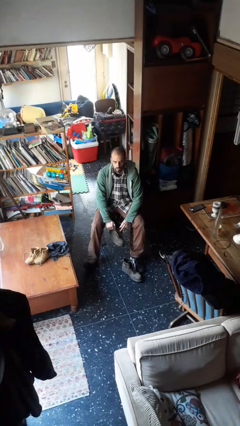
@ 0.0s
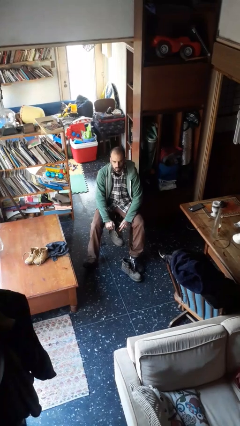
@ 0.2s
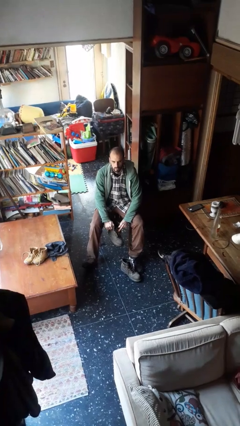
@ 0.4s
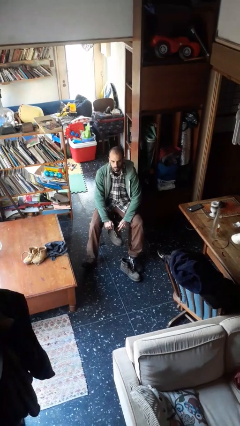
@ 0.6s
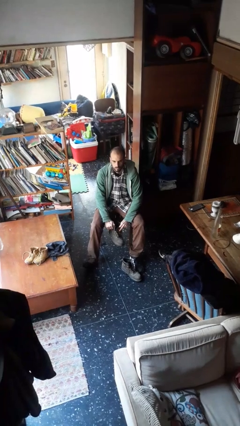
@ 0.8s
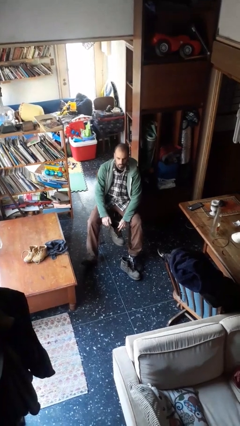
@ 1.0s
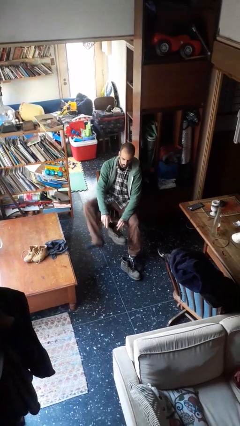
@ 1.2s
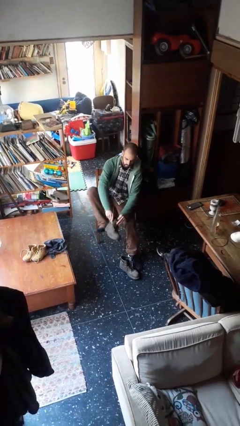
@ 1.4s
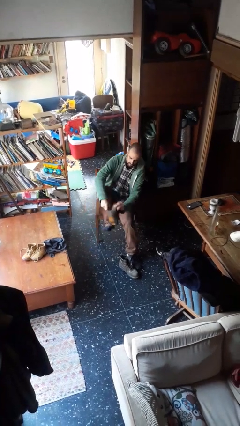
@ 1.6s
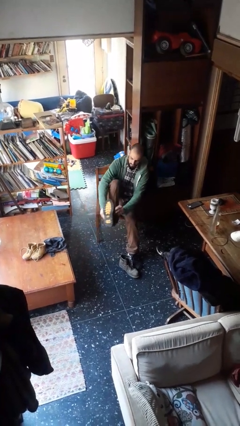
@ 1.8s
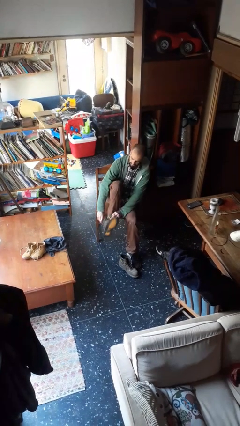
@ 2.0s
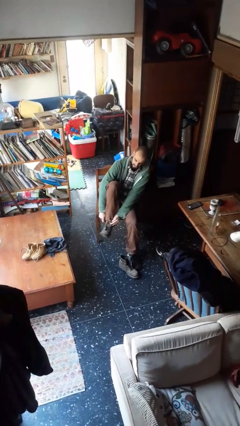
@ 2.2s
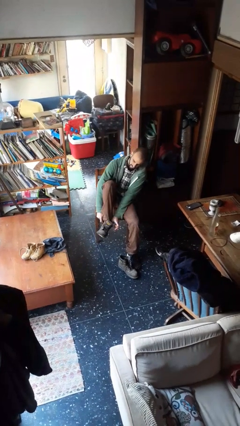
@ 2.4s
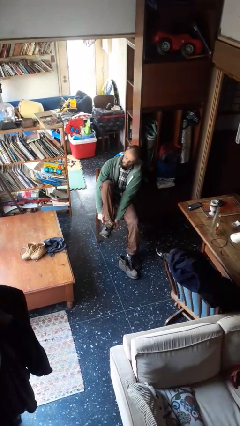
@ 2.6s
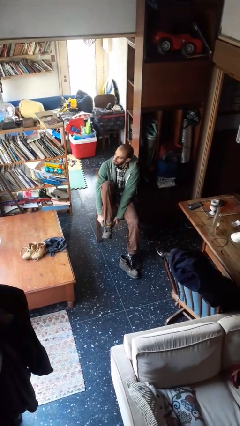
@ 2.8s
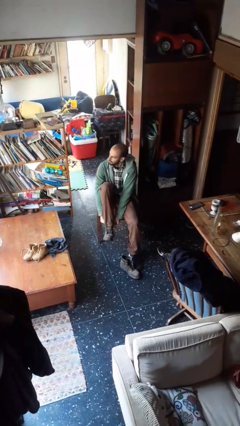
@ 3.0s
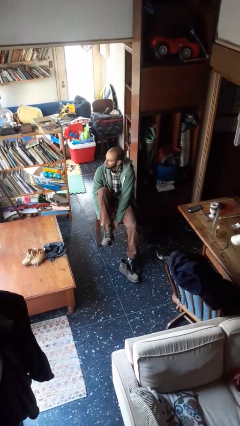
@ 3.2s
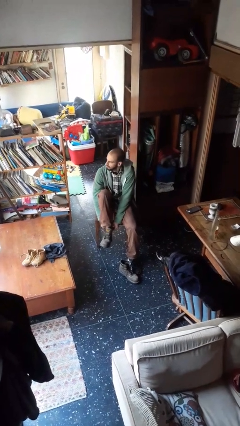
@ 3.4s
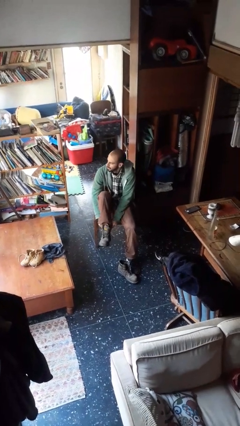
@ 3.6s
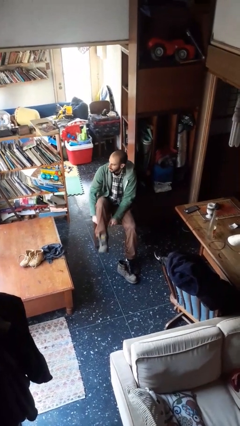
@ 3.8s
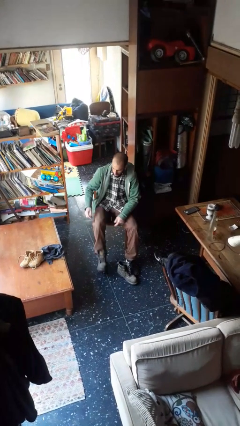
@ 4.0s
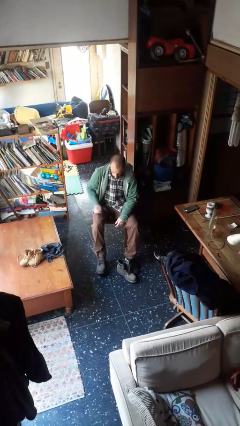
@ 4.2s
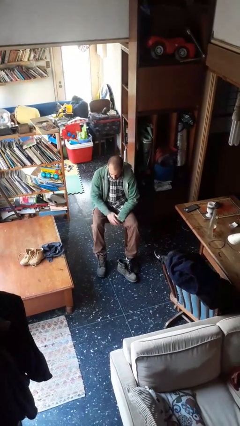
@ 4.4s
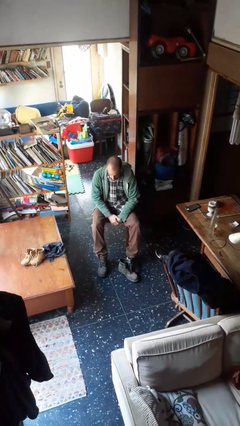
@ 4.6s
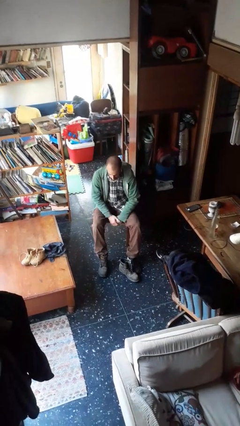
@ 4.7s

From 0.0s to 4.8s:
person puts on boots

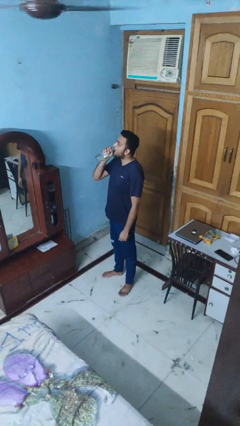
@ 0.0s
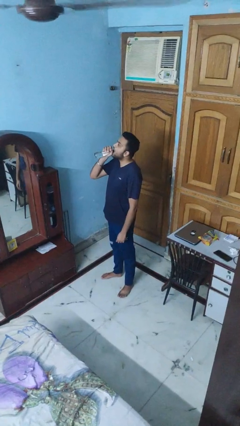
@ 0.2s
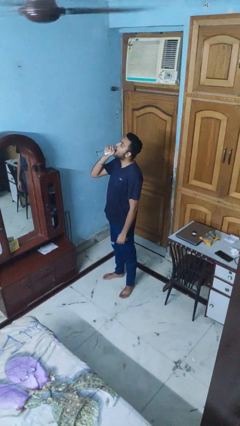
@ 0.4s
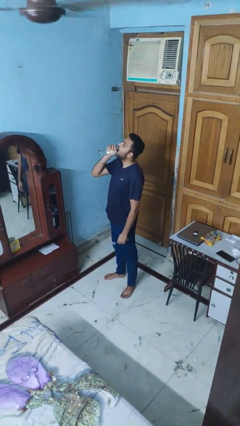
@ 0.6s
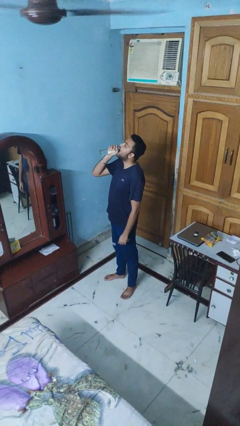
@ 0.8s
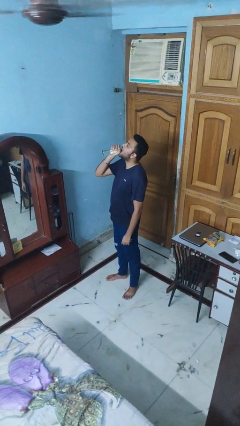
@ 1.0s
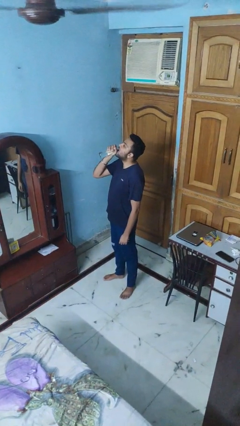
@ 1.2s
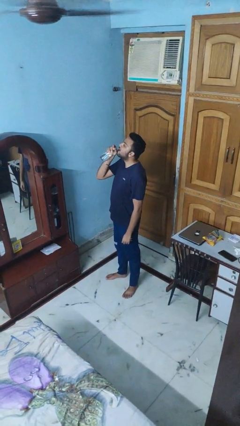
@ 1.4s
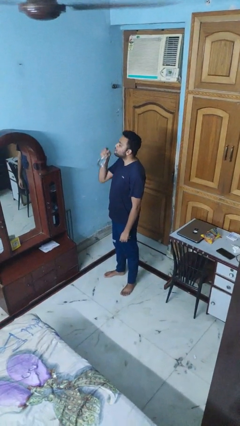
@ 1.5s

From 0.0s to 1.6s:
person drinks from bottle

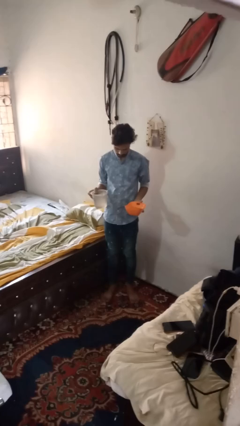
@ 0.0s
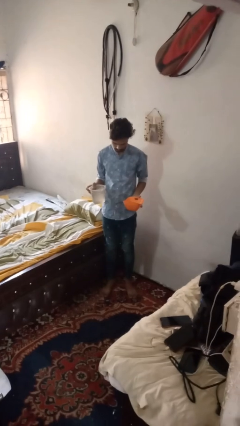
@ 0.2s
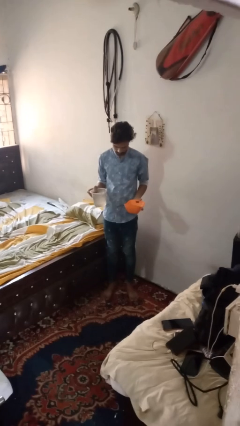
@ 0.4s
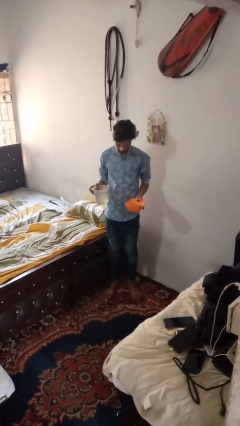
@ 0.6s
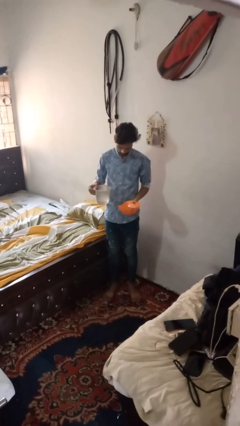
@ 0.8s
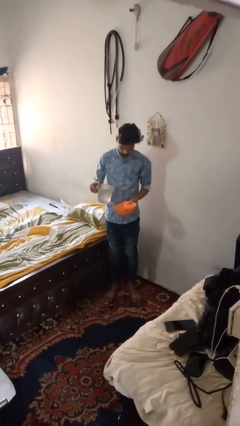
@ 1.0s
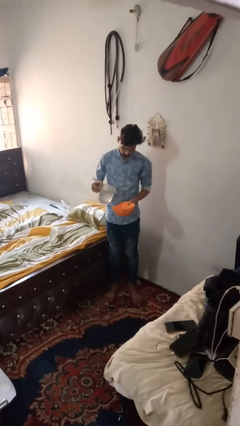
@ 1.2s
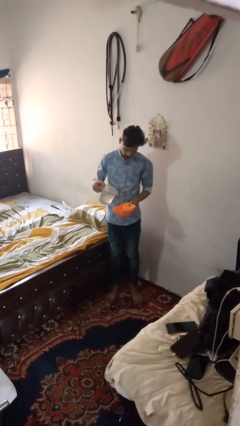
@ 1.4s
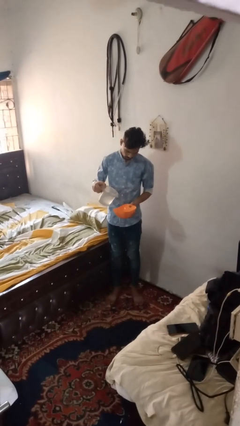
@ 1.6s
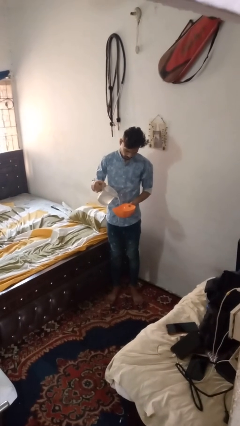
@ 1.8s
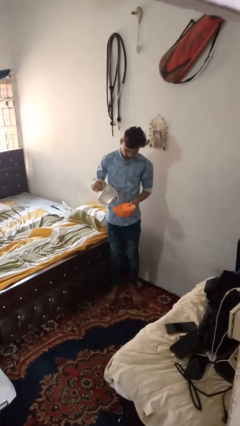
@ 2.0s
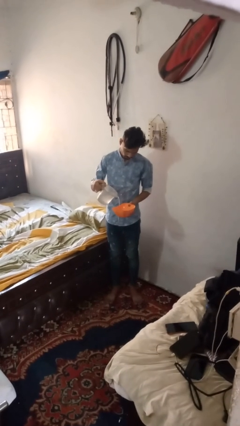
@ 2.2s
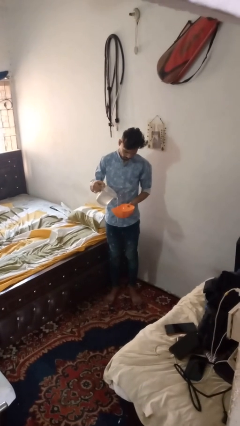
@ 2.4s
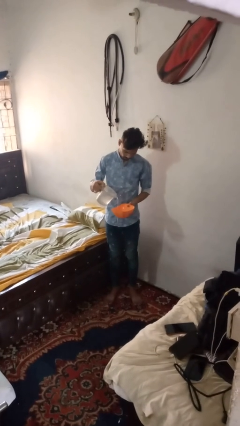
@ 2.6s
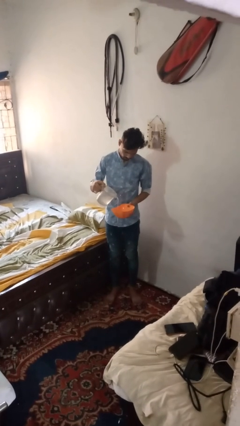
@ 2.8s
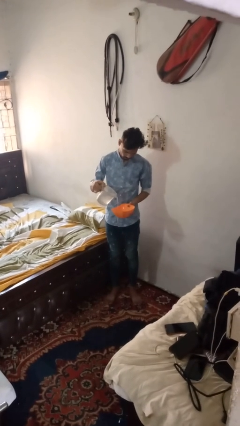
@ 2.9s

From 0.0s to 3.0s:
person pours into bowl

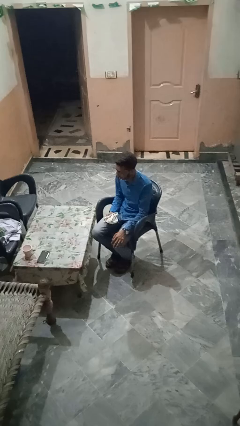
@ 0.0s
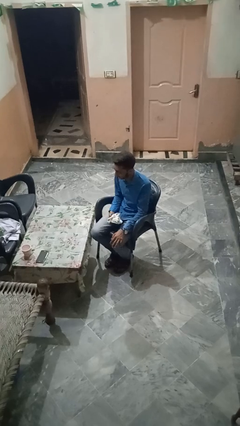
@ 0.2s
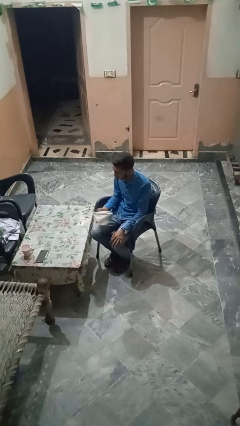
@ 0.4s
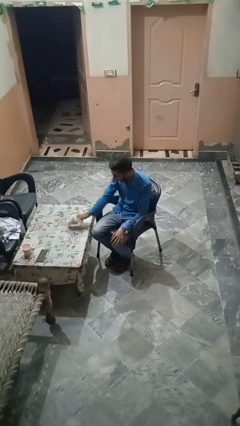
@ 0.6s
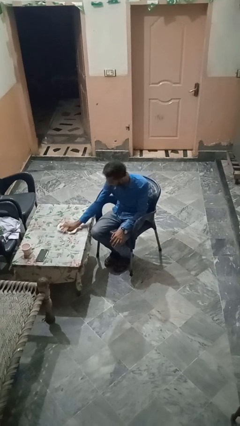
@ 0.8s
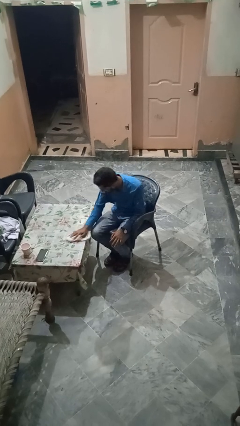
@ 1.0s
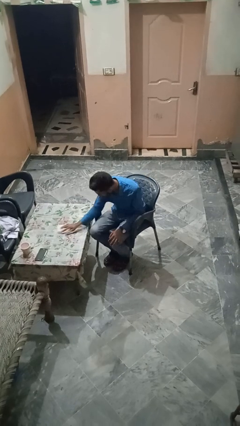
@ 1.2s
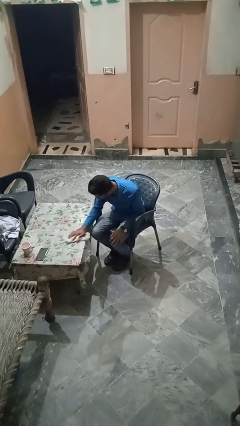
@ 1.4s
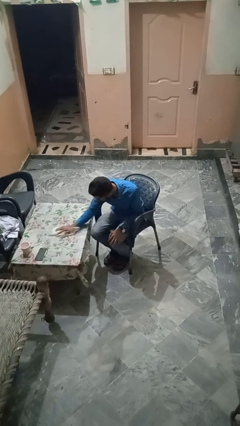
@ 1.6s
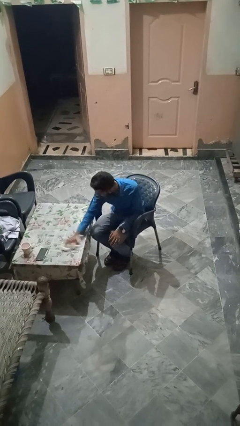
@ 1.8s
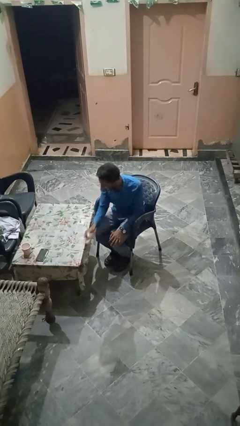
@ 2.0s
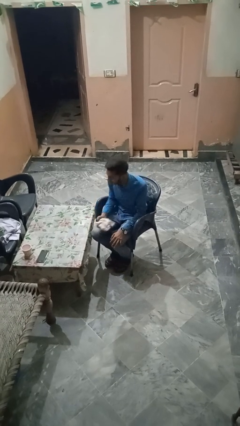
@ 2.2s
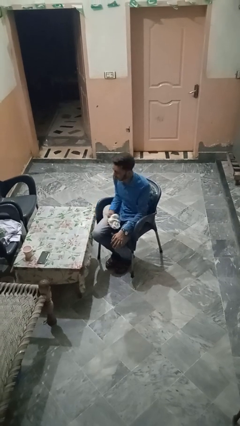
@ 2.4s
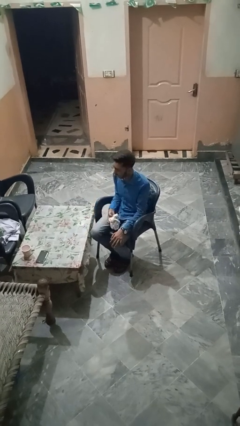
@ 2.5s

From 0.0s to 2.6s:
person cleans table with rag

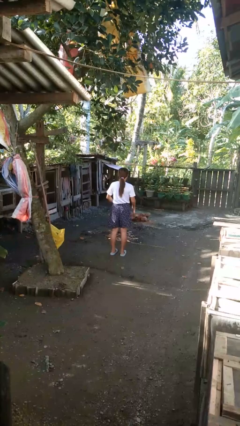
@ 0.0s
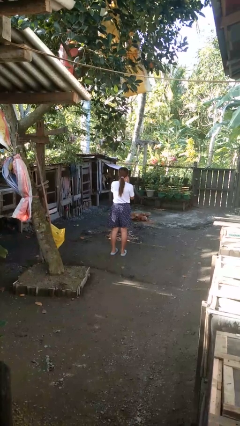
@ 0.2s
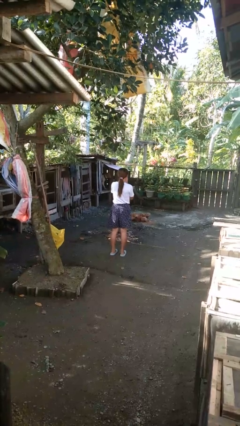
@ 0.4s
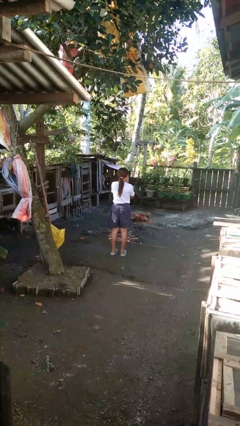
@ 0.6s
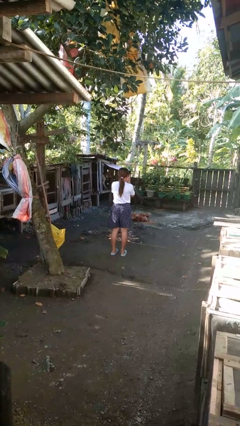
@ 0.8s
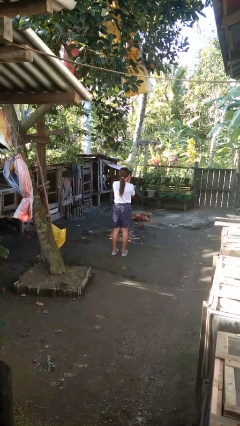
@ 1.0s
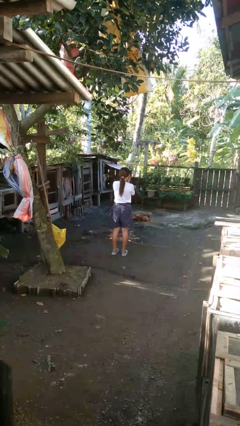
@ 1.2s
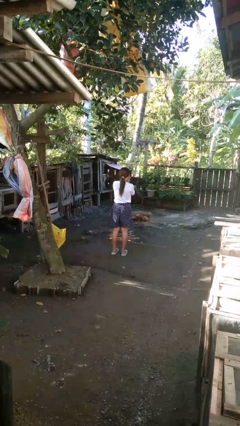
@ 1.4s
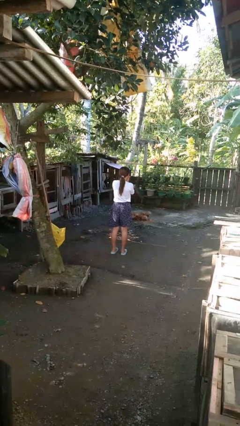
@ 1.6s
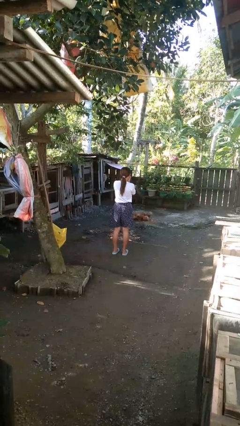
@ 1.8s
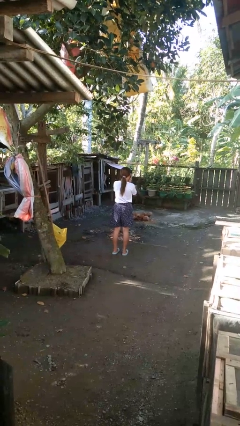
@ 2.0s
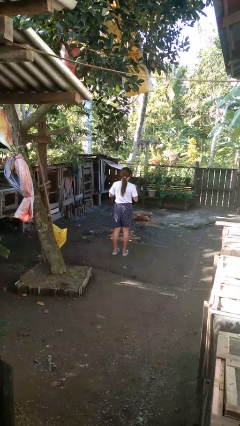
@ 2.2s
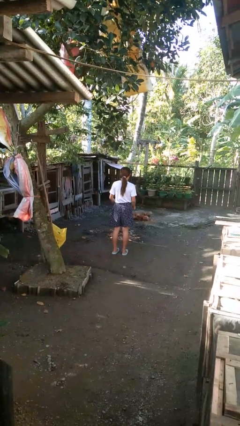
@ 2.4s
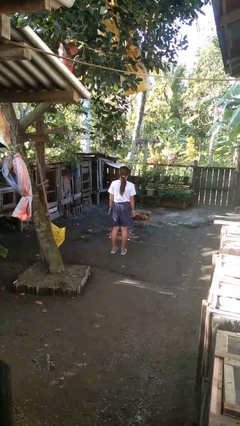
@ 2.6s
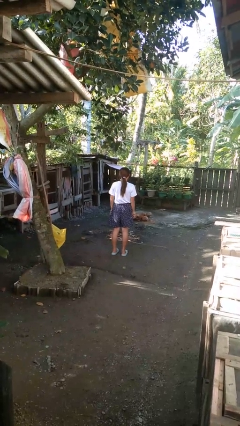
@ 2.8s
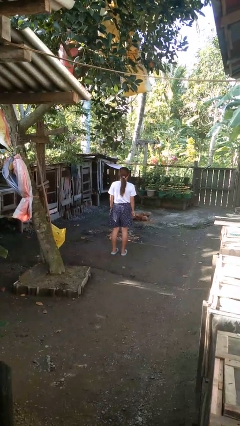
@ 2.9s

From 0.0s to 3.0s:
person blows into hands

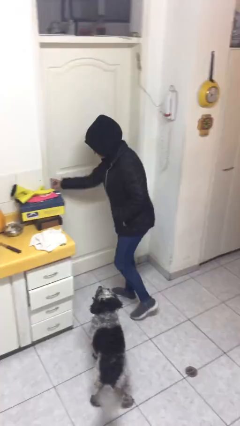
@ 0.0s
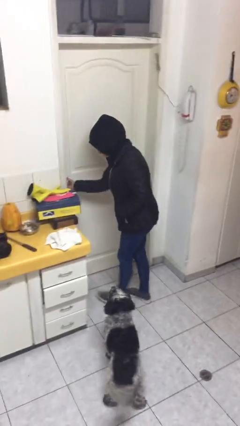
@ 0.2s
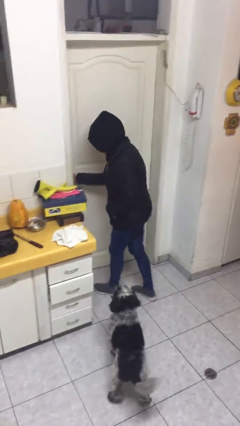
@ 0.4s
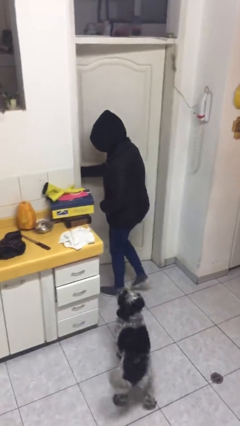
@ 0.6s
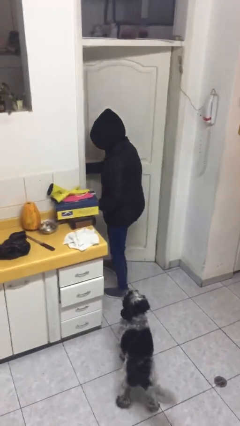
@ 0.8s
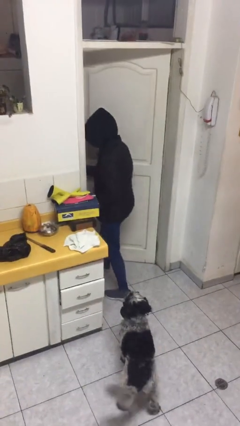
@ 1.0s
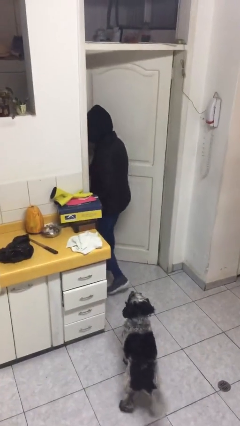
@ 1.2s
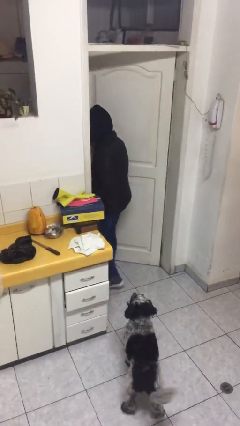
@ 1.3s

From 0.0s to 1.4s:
person opens facility door

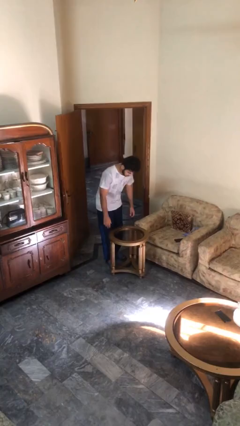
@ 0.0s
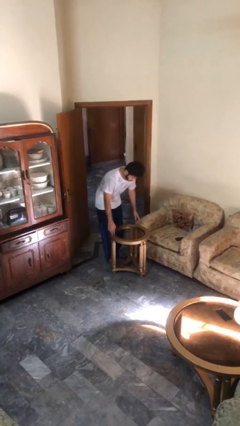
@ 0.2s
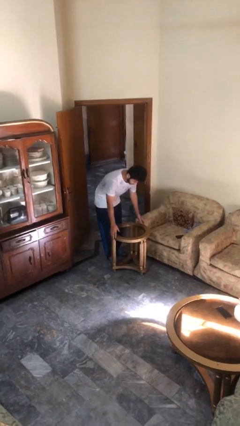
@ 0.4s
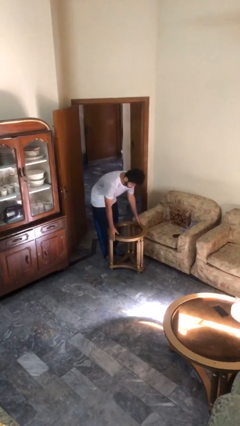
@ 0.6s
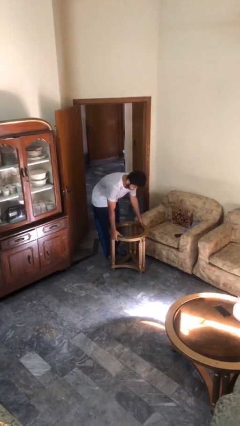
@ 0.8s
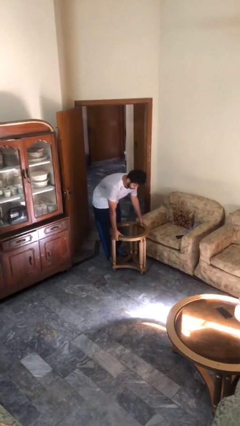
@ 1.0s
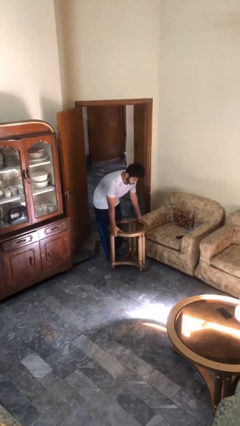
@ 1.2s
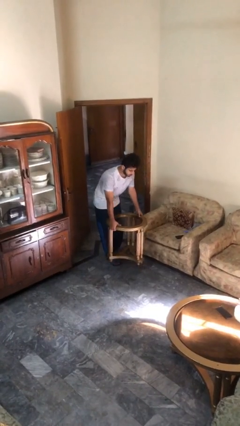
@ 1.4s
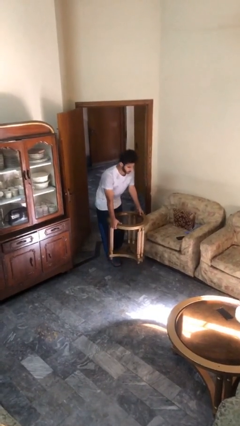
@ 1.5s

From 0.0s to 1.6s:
person picks up object from floor
